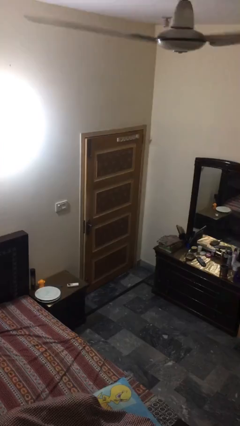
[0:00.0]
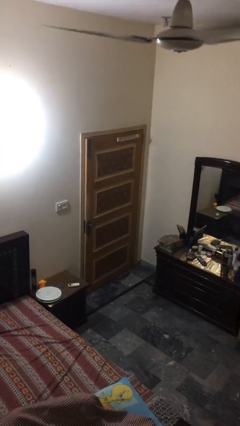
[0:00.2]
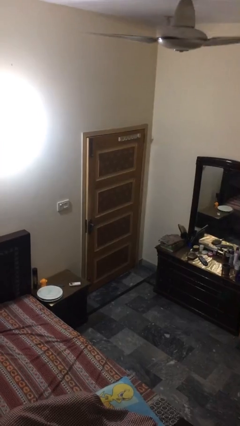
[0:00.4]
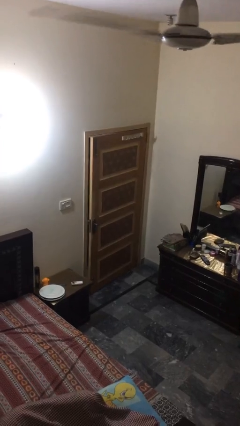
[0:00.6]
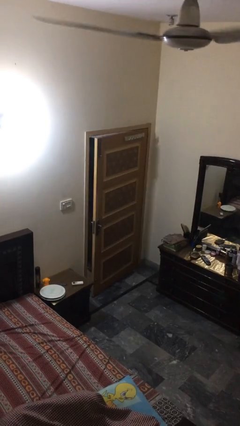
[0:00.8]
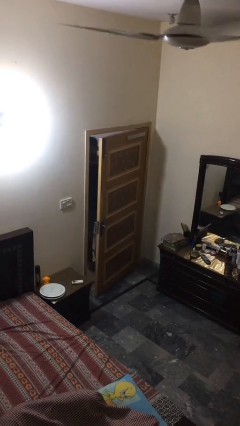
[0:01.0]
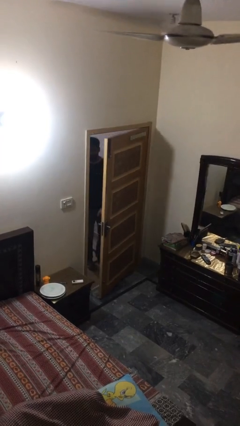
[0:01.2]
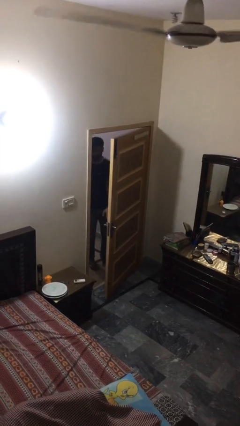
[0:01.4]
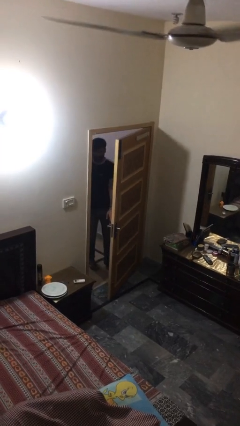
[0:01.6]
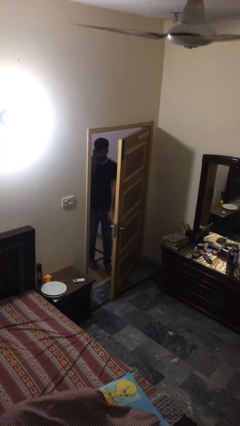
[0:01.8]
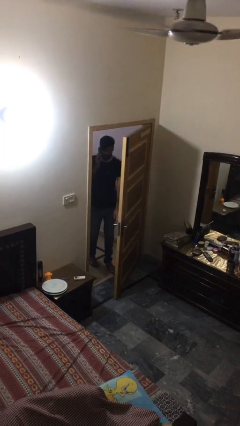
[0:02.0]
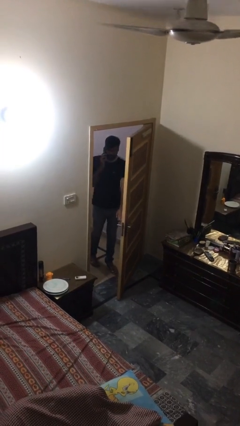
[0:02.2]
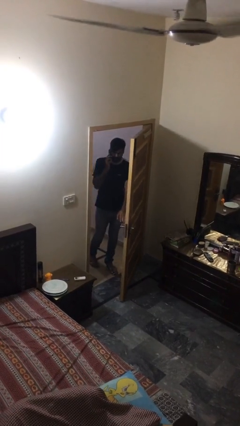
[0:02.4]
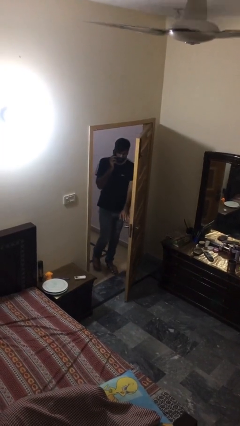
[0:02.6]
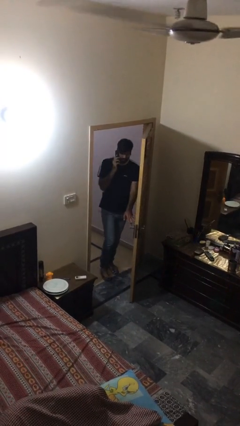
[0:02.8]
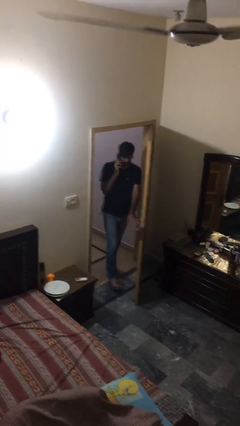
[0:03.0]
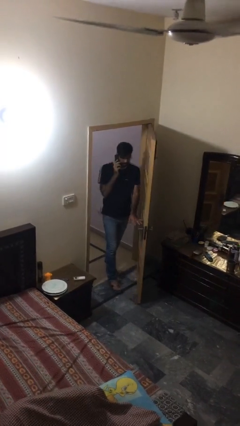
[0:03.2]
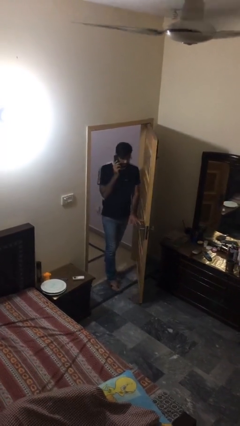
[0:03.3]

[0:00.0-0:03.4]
person opens facility door

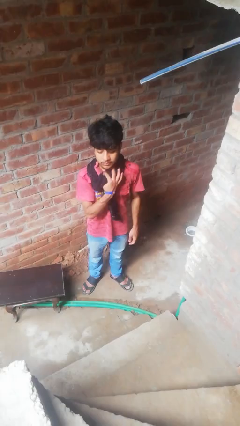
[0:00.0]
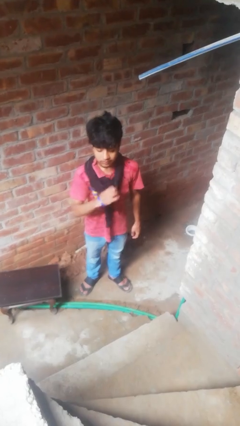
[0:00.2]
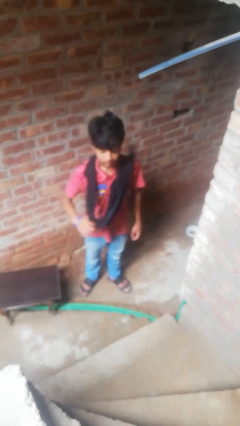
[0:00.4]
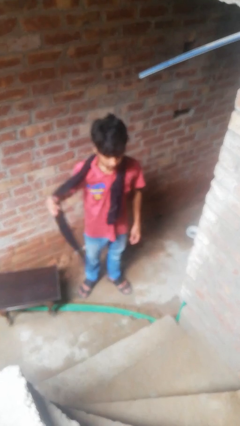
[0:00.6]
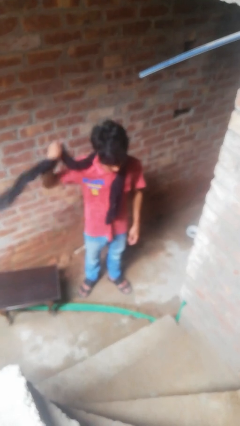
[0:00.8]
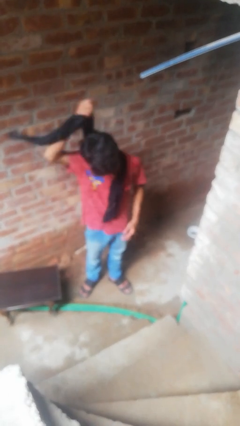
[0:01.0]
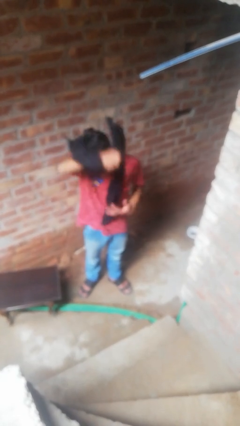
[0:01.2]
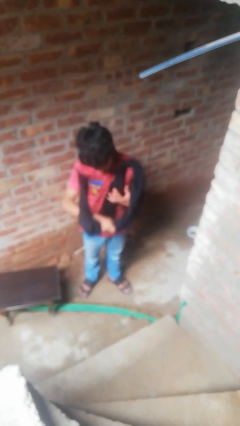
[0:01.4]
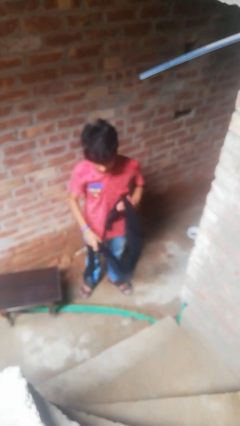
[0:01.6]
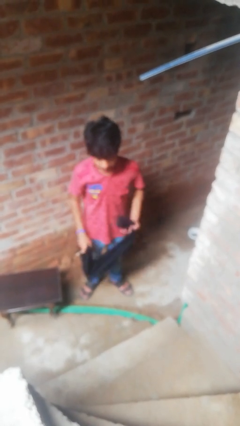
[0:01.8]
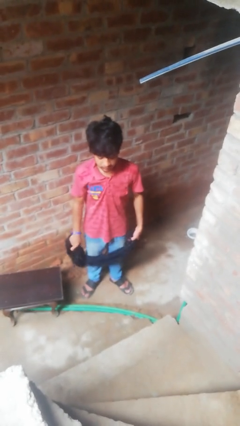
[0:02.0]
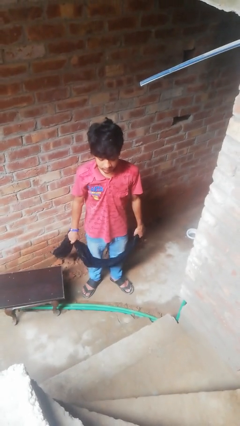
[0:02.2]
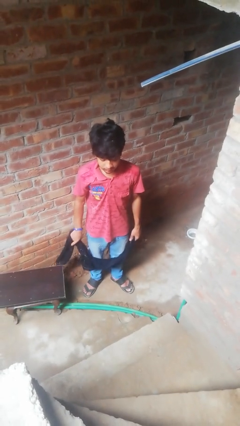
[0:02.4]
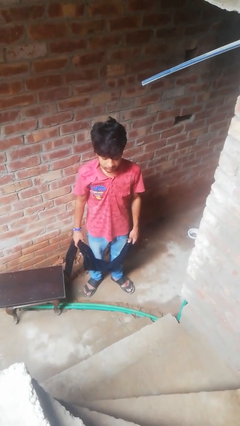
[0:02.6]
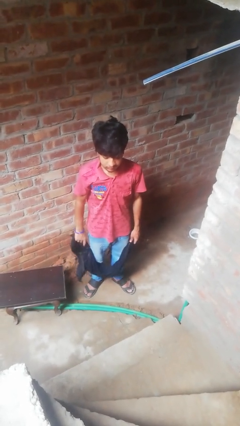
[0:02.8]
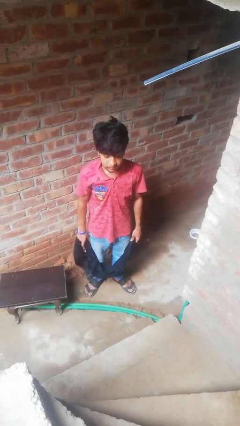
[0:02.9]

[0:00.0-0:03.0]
person takes off scarf

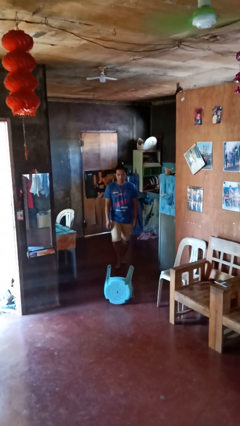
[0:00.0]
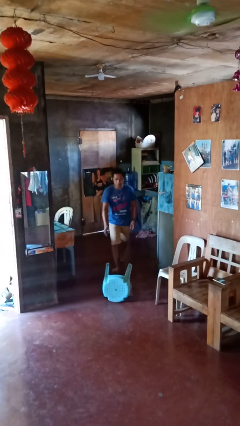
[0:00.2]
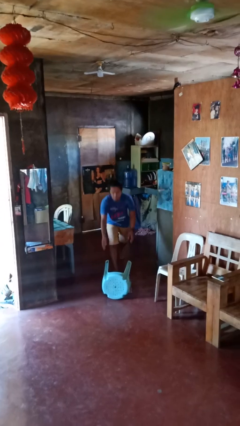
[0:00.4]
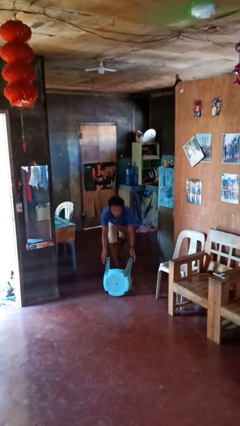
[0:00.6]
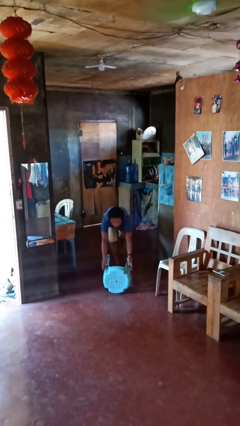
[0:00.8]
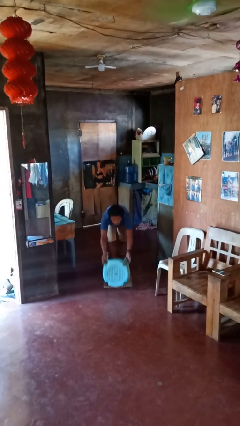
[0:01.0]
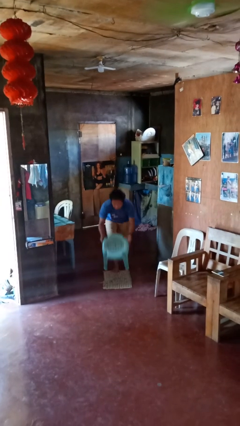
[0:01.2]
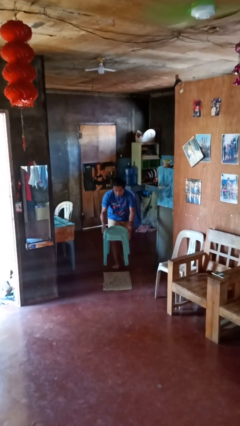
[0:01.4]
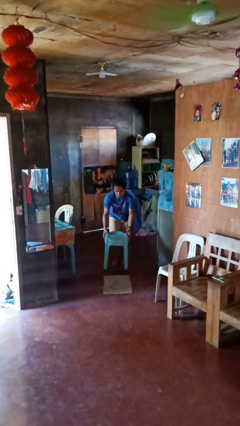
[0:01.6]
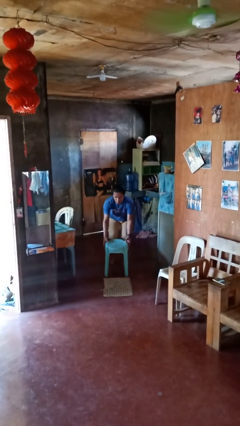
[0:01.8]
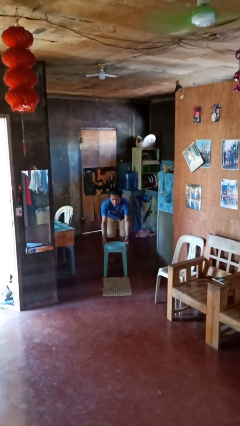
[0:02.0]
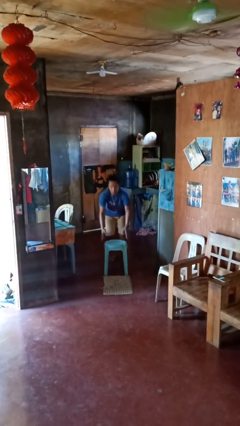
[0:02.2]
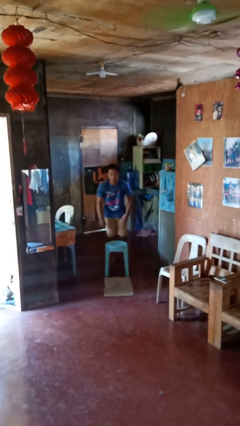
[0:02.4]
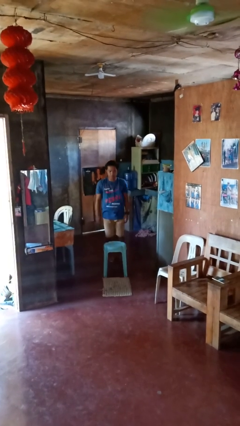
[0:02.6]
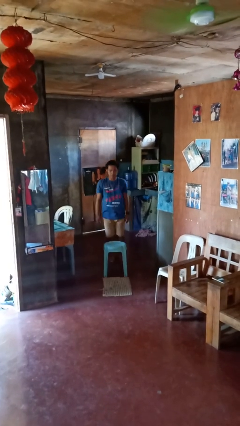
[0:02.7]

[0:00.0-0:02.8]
person sets upright furniture

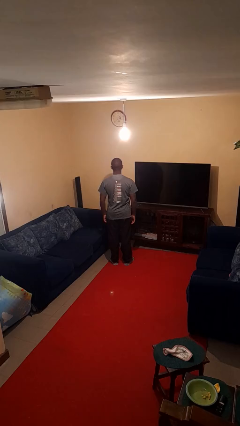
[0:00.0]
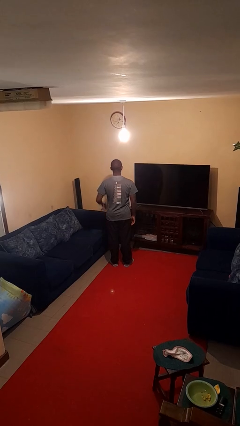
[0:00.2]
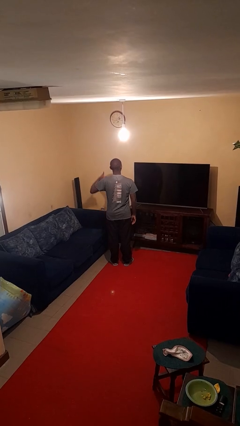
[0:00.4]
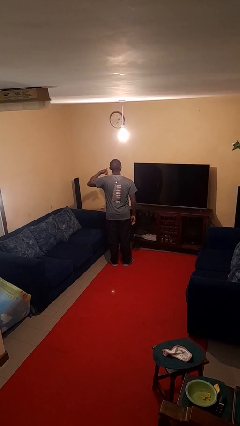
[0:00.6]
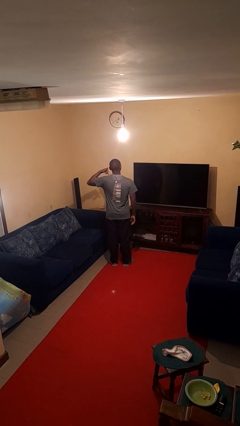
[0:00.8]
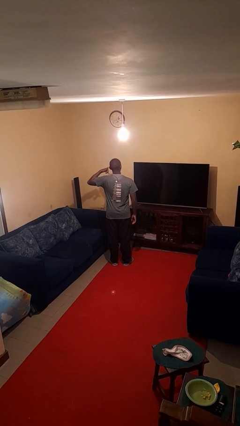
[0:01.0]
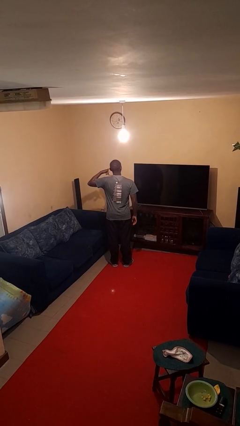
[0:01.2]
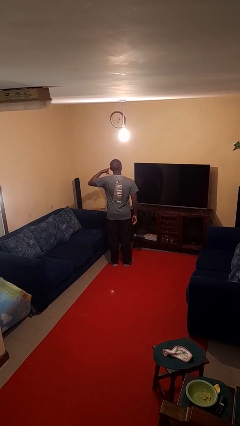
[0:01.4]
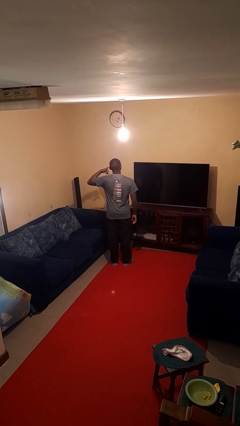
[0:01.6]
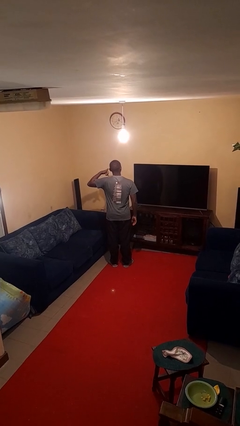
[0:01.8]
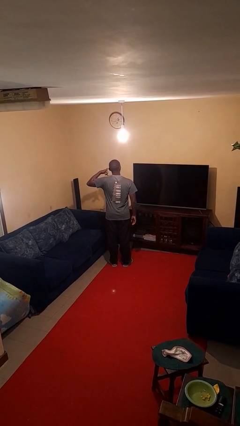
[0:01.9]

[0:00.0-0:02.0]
person gestures call me

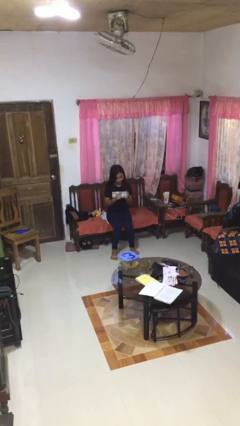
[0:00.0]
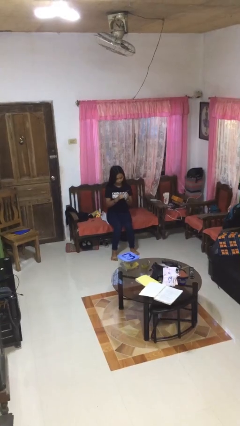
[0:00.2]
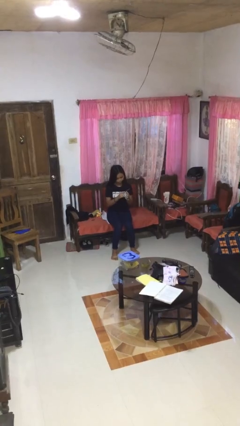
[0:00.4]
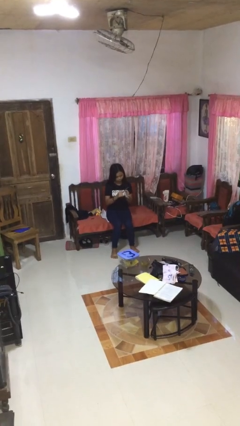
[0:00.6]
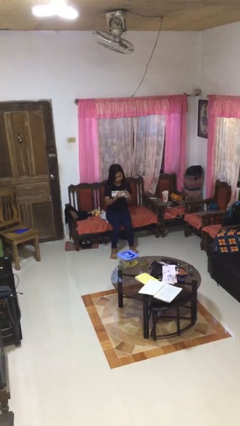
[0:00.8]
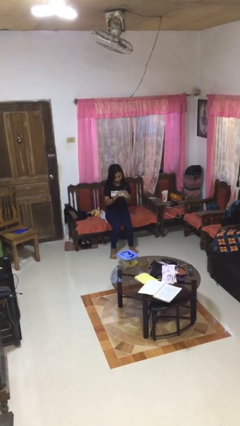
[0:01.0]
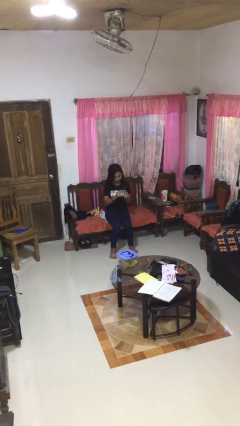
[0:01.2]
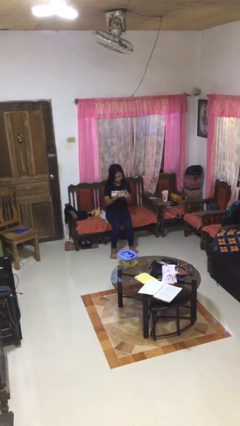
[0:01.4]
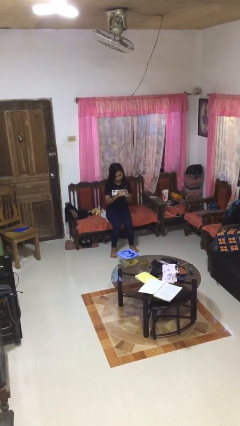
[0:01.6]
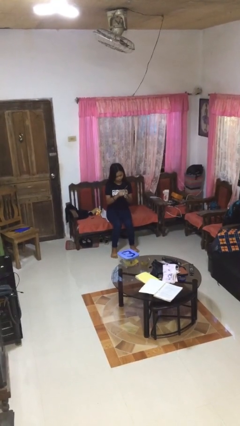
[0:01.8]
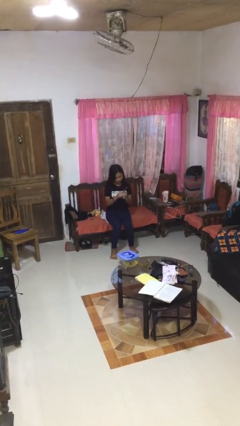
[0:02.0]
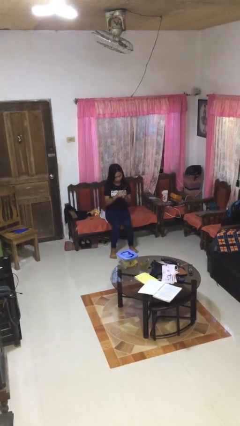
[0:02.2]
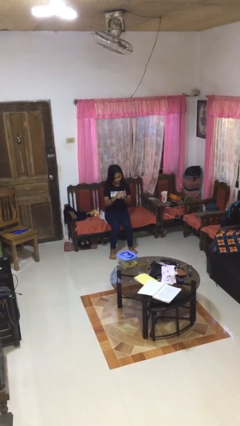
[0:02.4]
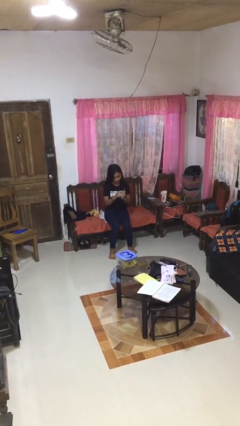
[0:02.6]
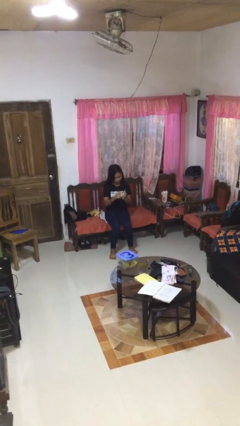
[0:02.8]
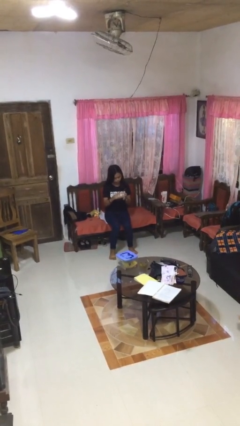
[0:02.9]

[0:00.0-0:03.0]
person files fingernails

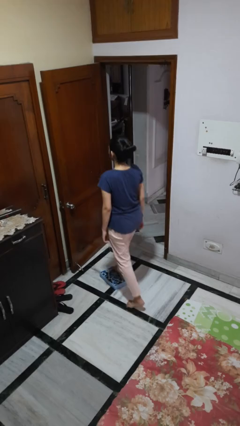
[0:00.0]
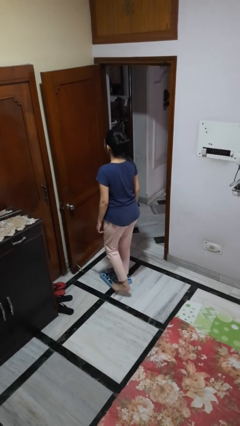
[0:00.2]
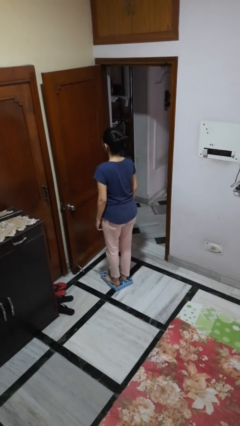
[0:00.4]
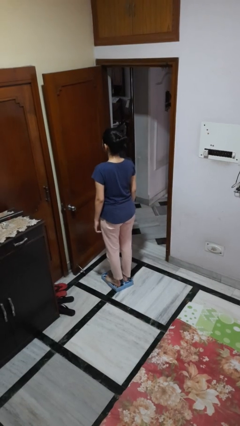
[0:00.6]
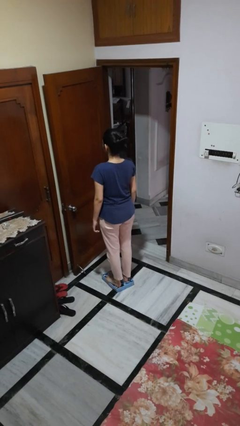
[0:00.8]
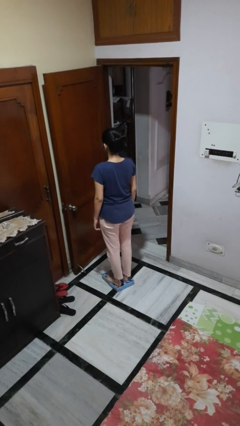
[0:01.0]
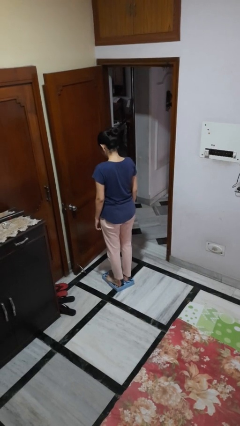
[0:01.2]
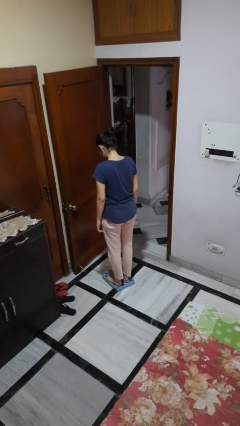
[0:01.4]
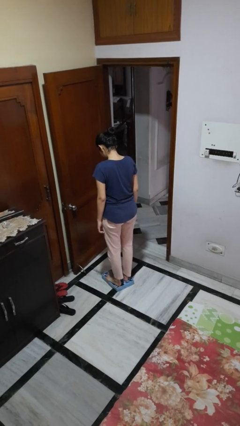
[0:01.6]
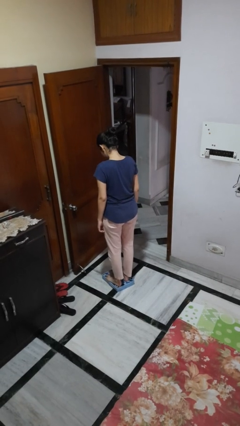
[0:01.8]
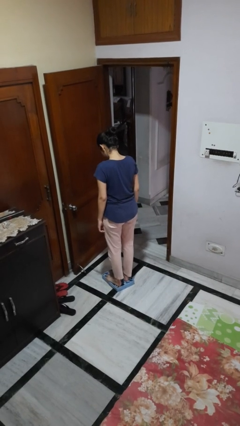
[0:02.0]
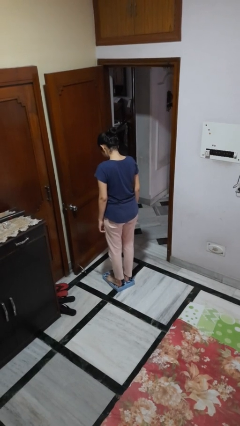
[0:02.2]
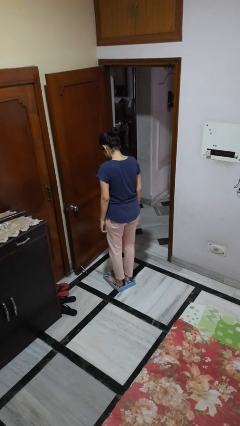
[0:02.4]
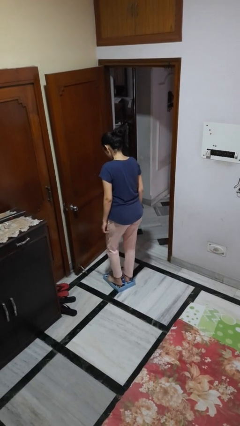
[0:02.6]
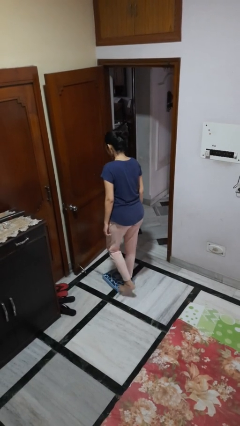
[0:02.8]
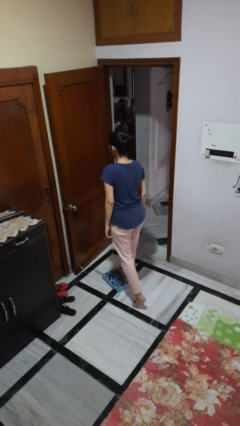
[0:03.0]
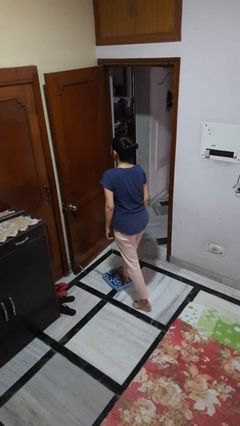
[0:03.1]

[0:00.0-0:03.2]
person uses bodyweight scale
